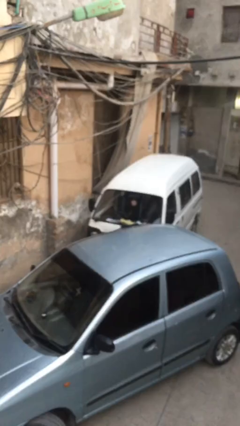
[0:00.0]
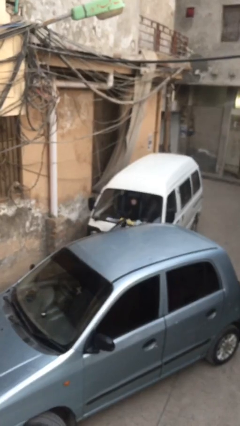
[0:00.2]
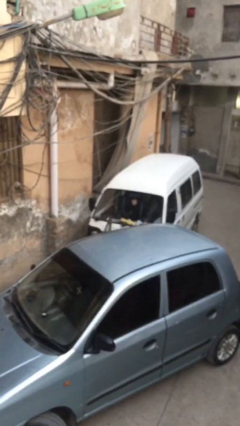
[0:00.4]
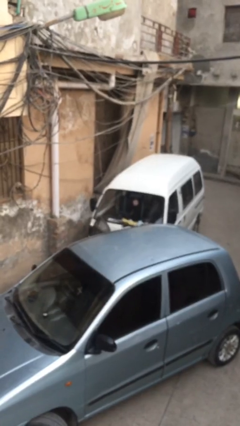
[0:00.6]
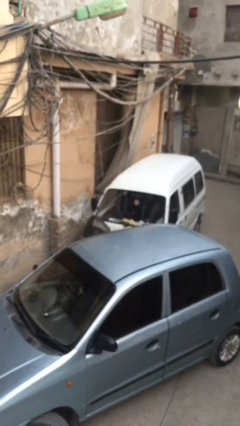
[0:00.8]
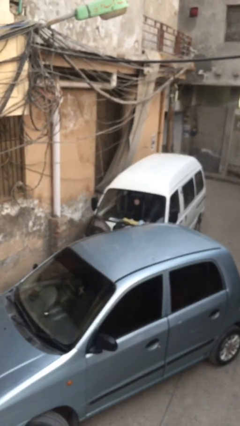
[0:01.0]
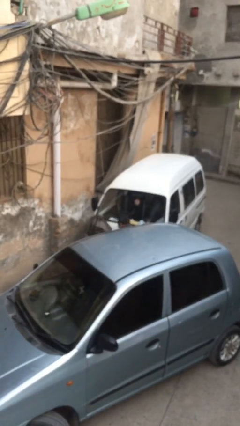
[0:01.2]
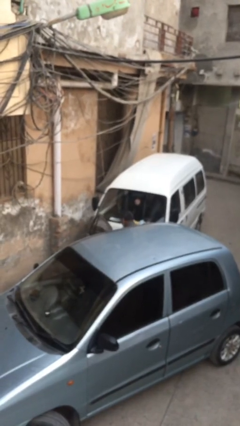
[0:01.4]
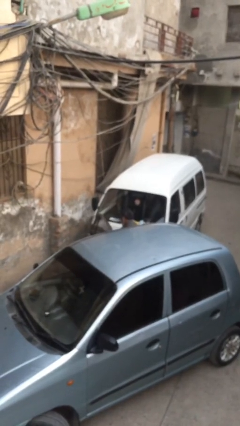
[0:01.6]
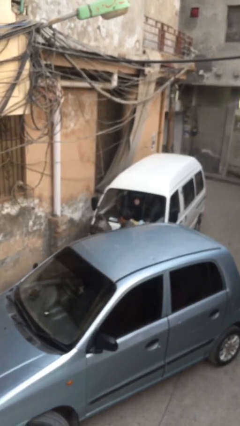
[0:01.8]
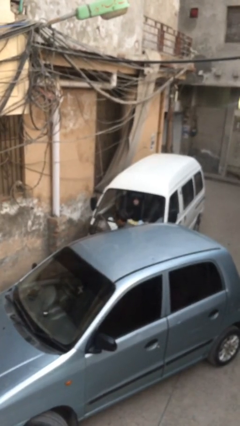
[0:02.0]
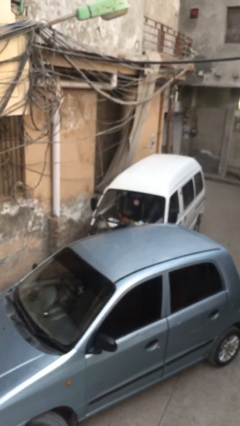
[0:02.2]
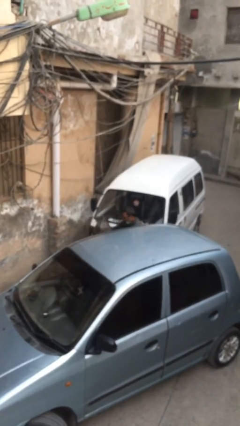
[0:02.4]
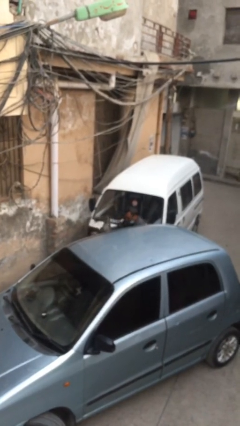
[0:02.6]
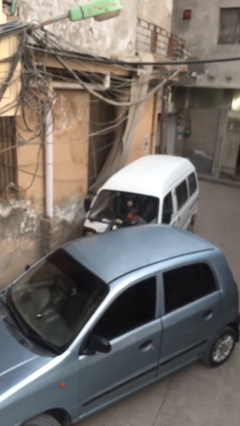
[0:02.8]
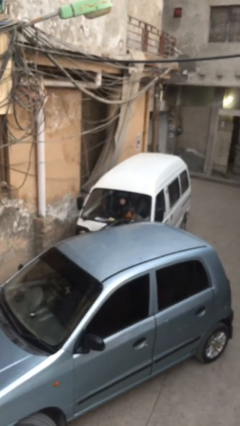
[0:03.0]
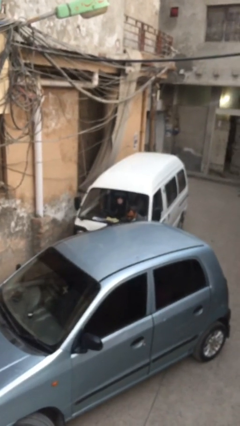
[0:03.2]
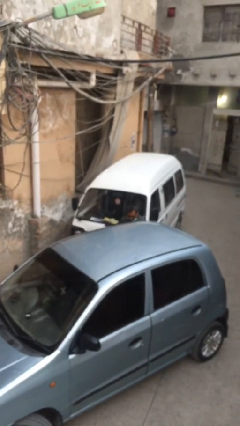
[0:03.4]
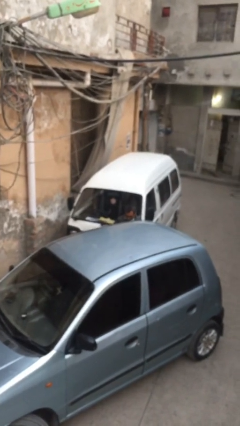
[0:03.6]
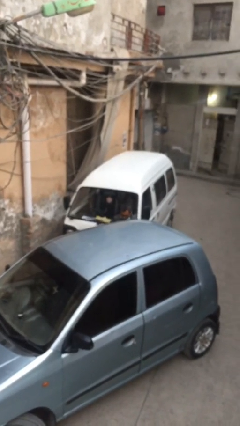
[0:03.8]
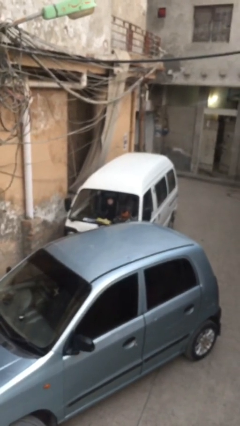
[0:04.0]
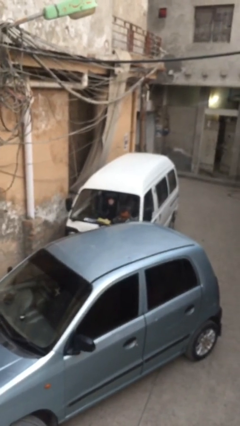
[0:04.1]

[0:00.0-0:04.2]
car drops off person

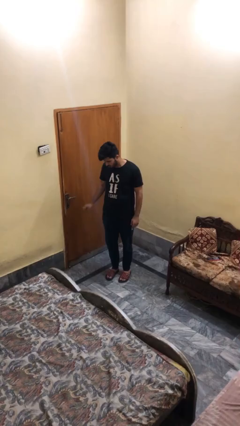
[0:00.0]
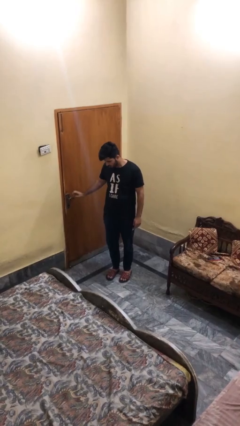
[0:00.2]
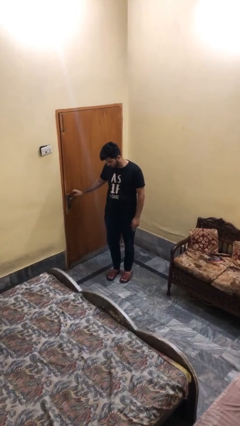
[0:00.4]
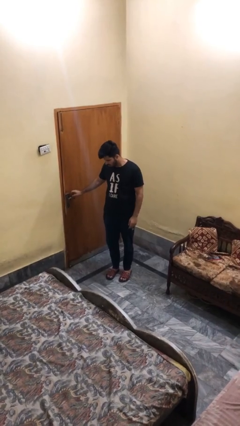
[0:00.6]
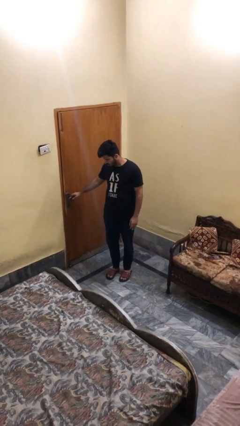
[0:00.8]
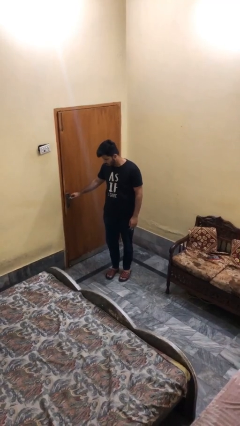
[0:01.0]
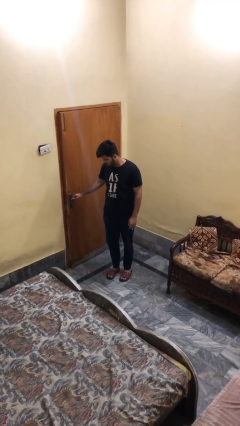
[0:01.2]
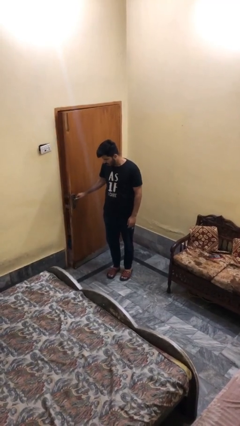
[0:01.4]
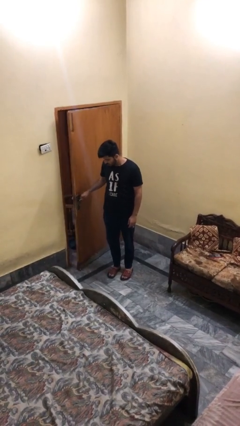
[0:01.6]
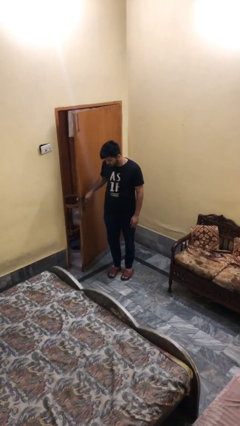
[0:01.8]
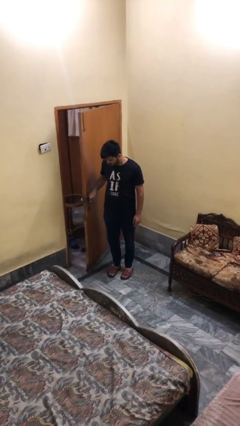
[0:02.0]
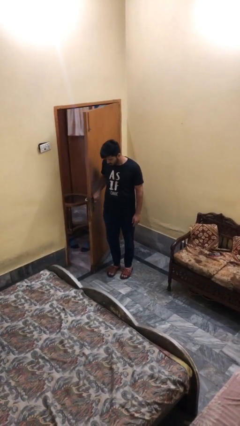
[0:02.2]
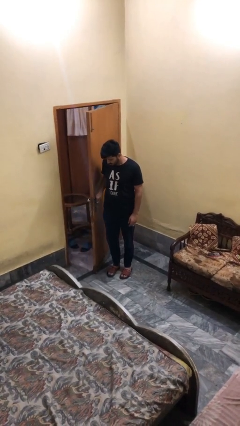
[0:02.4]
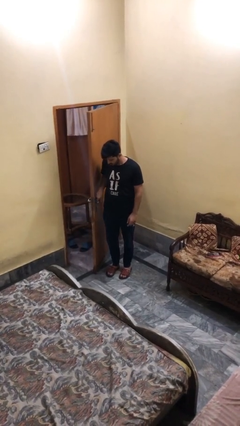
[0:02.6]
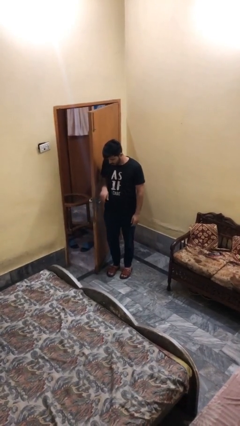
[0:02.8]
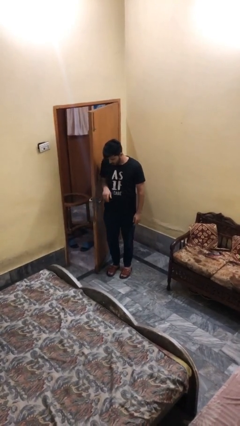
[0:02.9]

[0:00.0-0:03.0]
person opens facility door

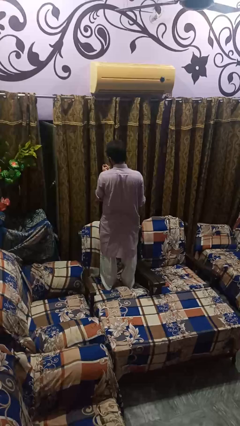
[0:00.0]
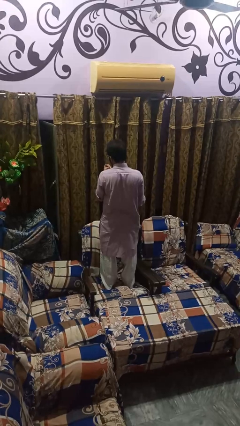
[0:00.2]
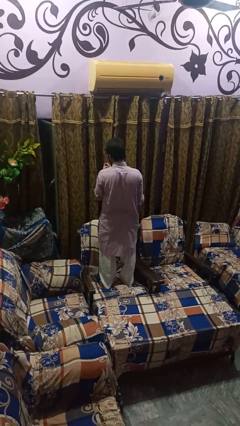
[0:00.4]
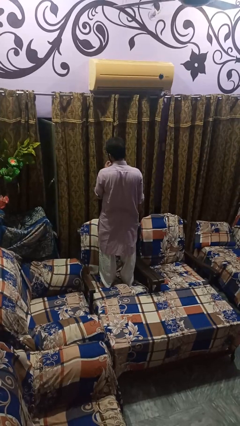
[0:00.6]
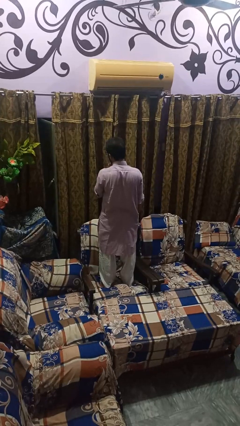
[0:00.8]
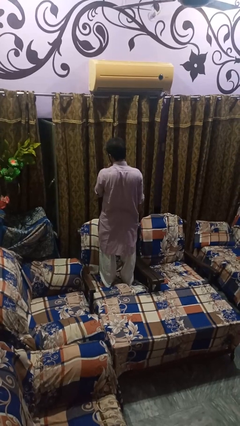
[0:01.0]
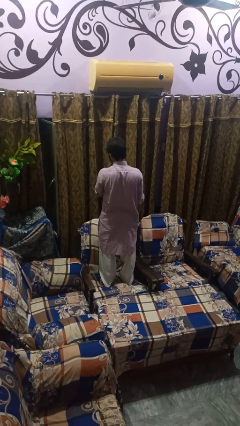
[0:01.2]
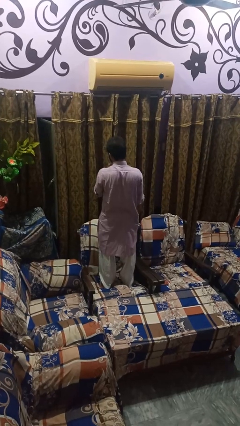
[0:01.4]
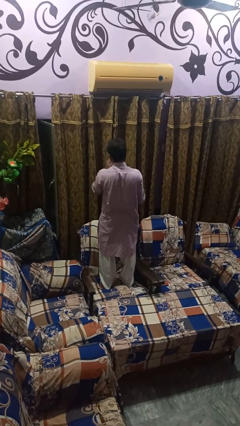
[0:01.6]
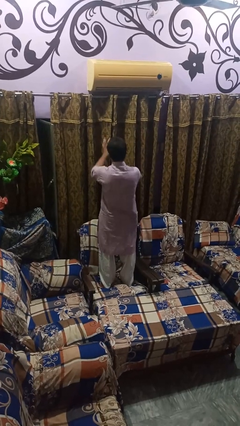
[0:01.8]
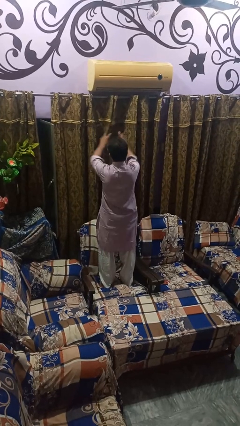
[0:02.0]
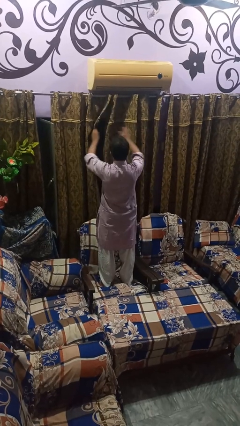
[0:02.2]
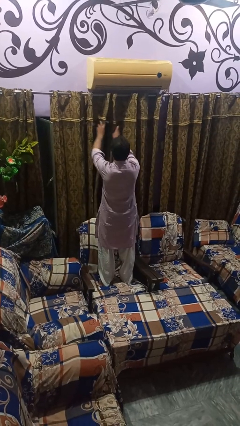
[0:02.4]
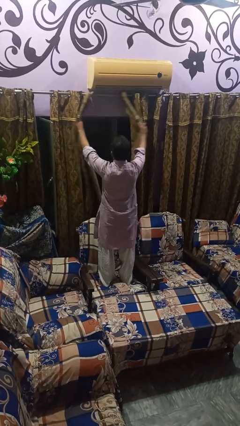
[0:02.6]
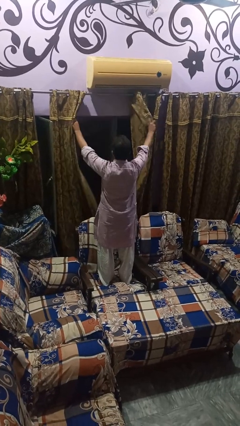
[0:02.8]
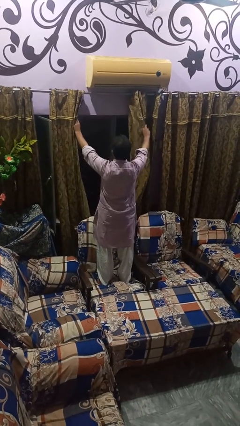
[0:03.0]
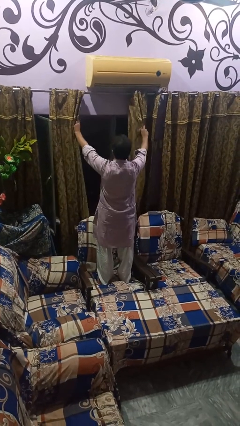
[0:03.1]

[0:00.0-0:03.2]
person opens curtains

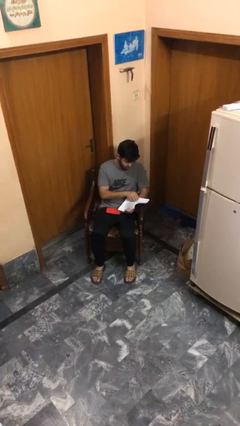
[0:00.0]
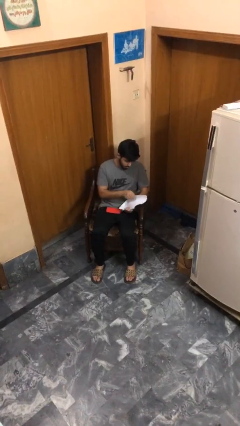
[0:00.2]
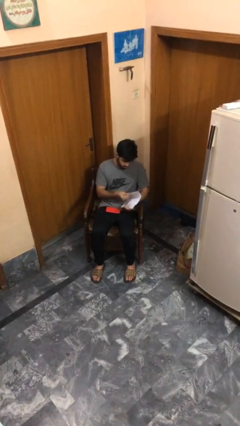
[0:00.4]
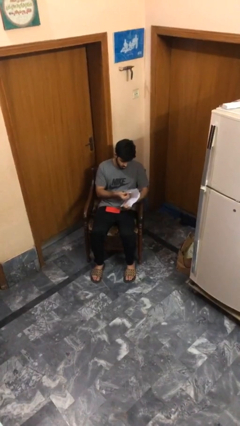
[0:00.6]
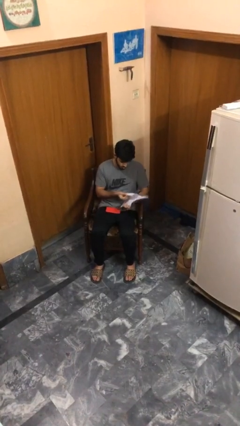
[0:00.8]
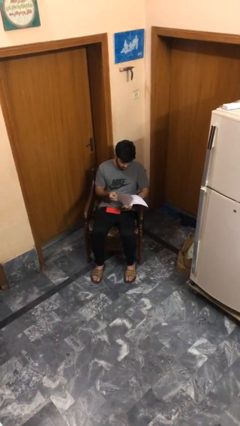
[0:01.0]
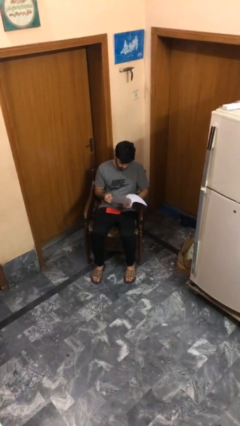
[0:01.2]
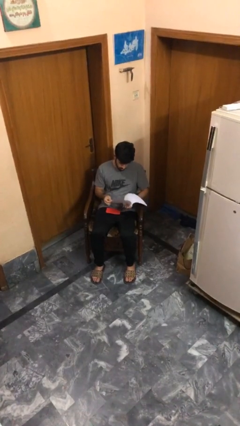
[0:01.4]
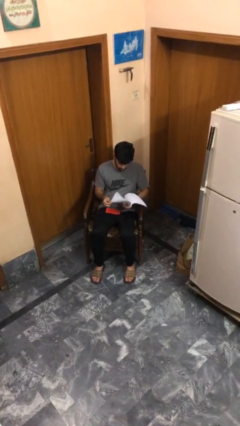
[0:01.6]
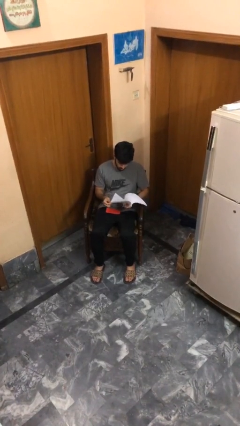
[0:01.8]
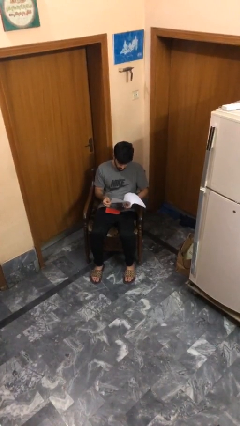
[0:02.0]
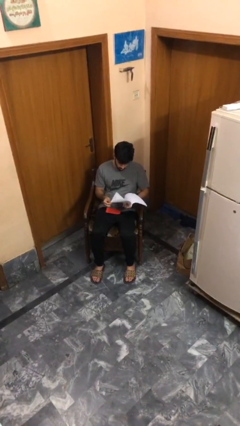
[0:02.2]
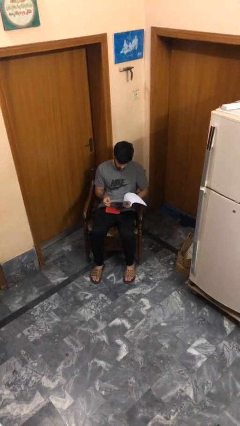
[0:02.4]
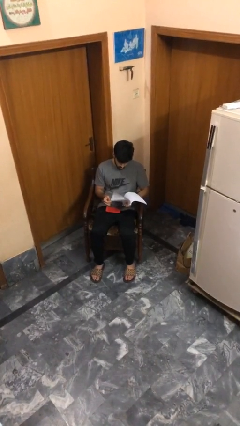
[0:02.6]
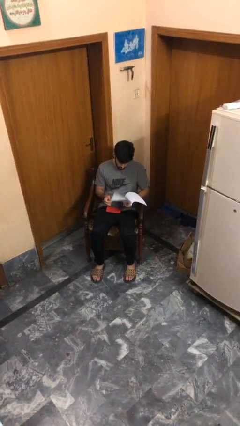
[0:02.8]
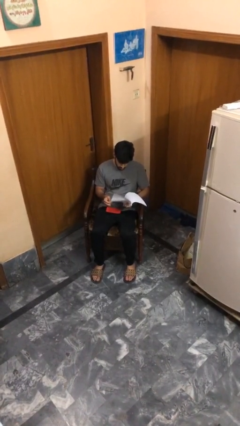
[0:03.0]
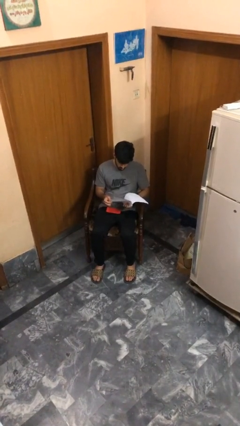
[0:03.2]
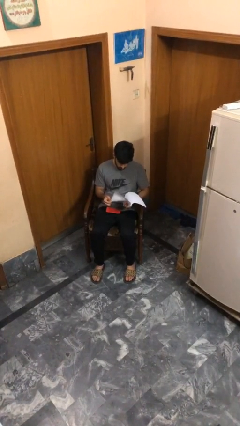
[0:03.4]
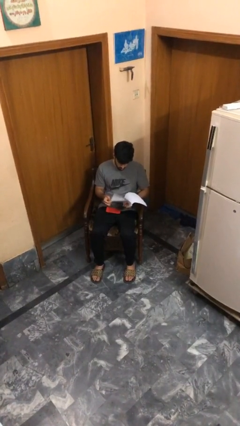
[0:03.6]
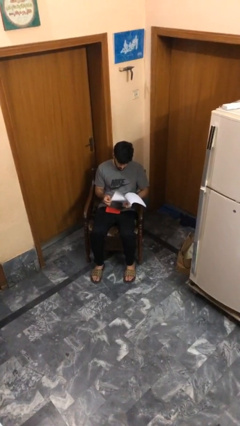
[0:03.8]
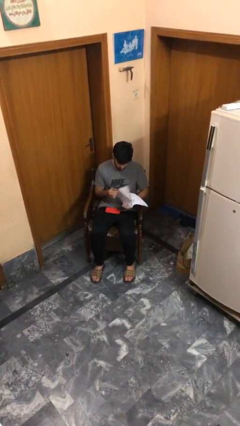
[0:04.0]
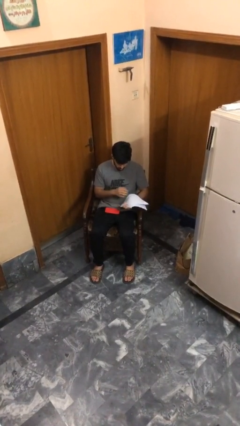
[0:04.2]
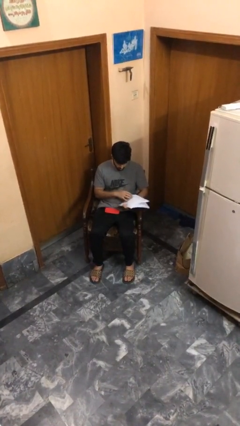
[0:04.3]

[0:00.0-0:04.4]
person reads magazine

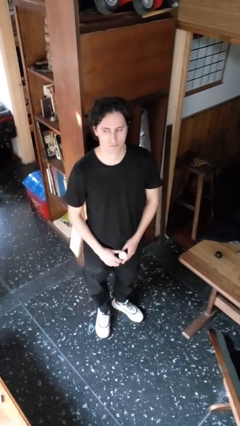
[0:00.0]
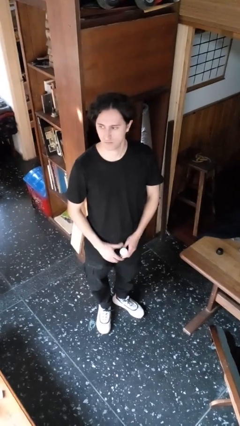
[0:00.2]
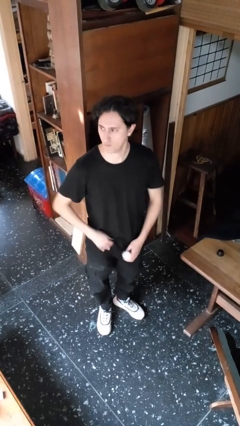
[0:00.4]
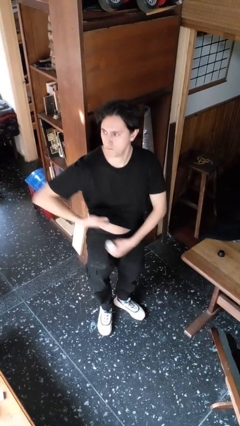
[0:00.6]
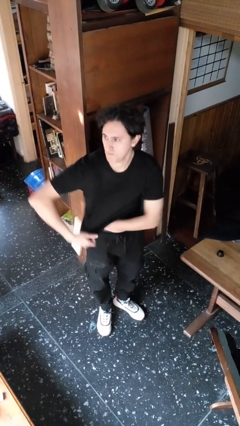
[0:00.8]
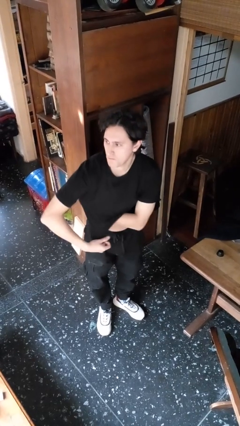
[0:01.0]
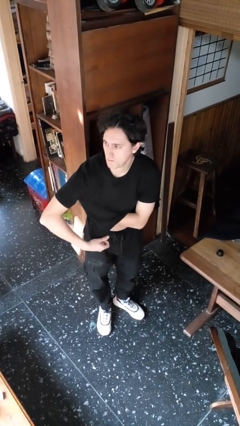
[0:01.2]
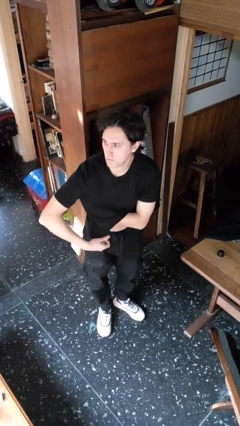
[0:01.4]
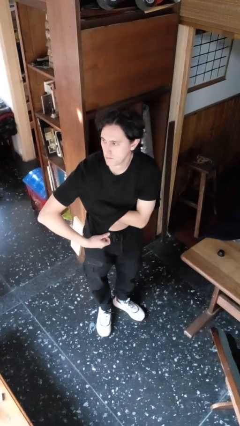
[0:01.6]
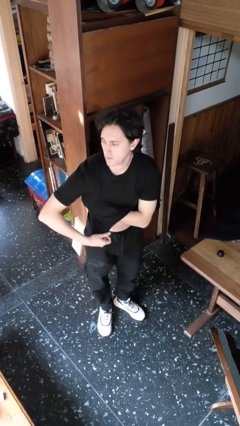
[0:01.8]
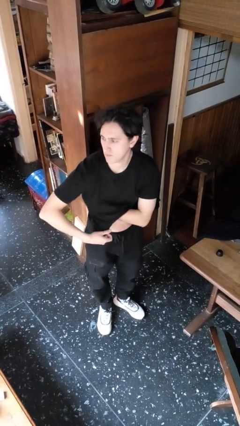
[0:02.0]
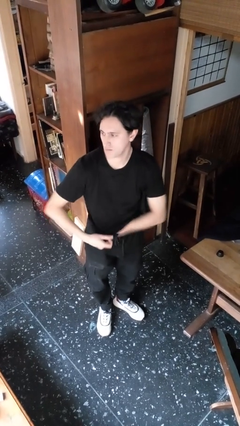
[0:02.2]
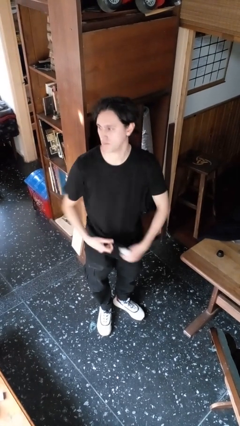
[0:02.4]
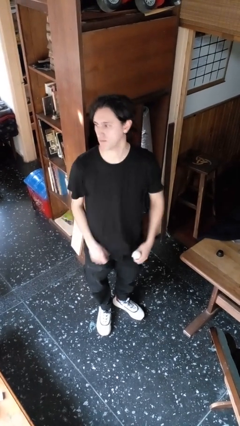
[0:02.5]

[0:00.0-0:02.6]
person applies deodorant
